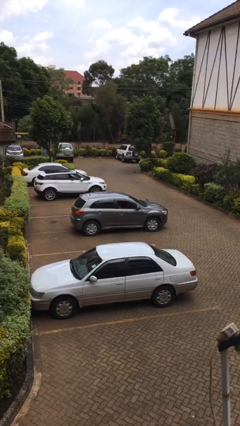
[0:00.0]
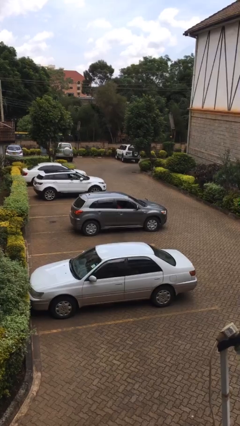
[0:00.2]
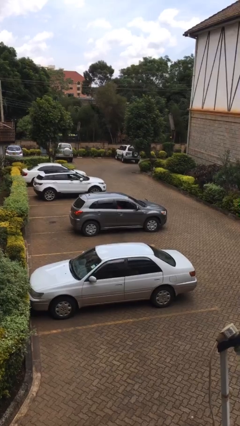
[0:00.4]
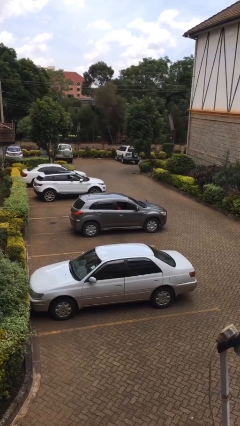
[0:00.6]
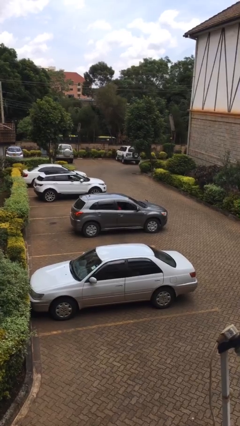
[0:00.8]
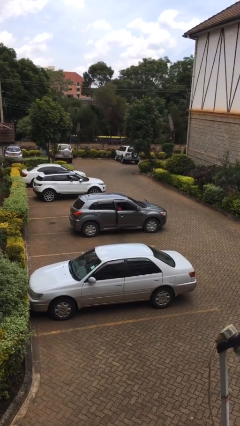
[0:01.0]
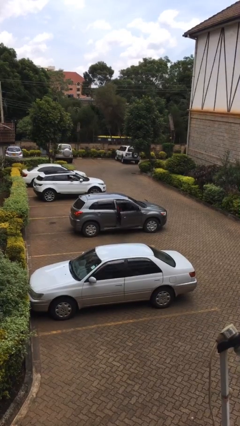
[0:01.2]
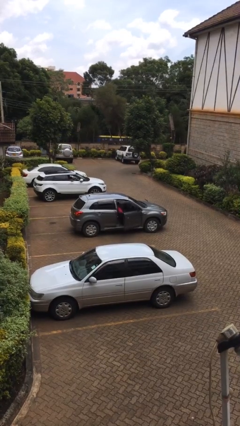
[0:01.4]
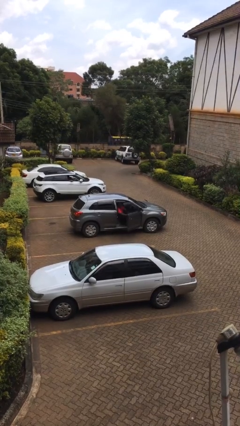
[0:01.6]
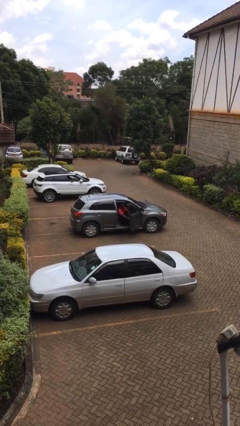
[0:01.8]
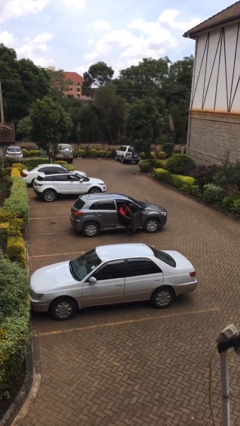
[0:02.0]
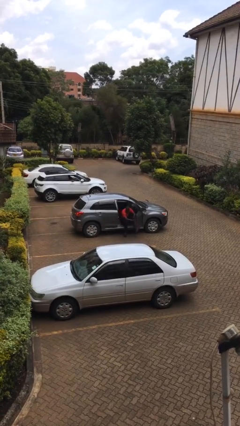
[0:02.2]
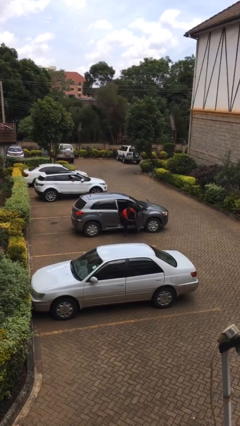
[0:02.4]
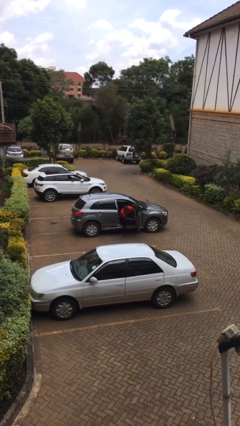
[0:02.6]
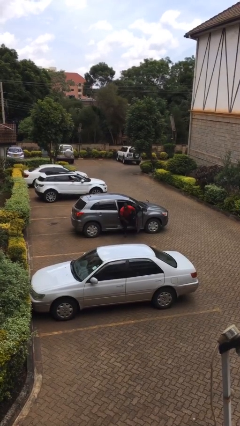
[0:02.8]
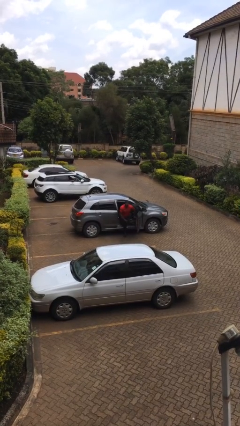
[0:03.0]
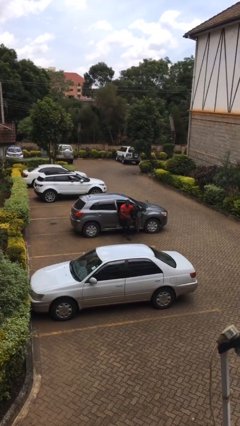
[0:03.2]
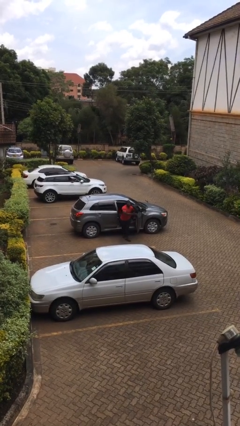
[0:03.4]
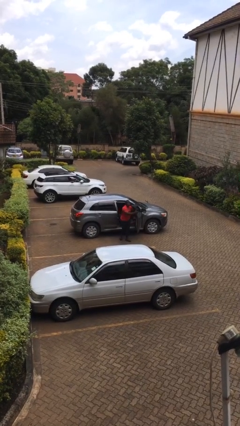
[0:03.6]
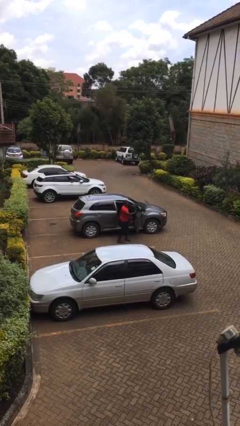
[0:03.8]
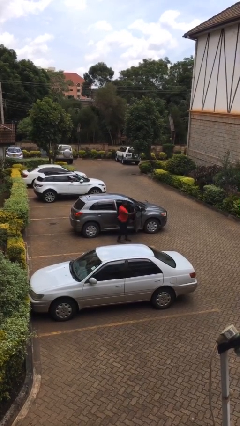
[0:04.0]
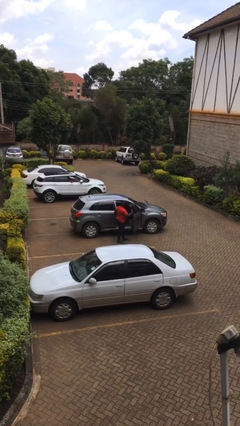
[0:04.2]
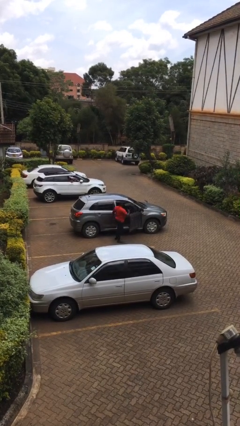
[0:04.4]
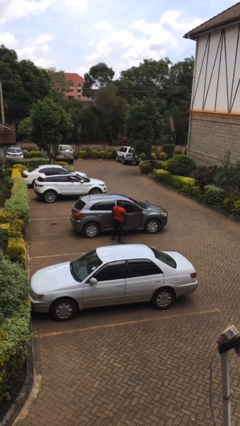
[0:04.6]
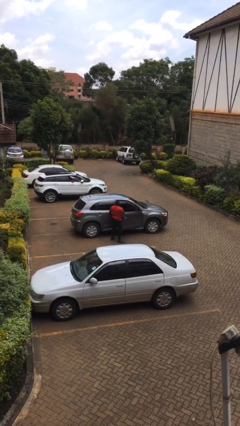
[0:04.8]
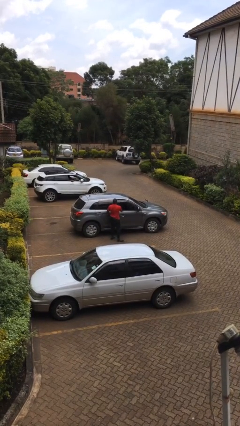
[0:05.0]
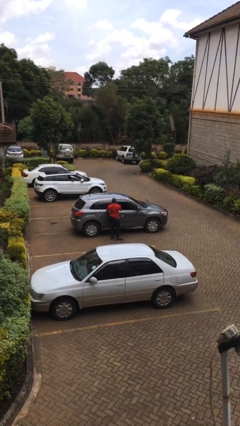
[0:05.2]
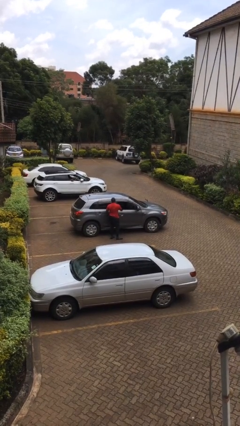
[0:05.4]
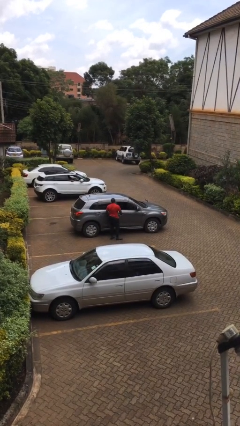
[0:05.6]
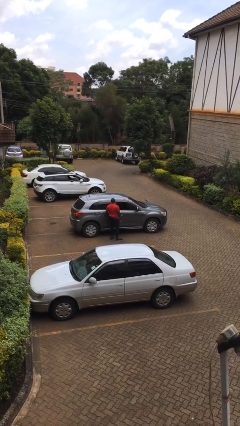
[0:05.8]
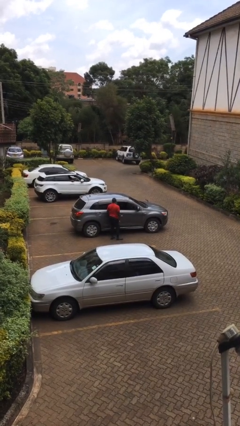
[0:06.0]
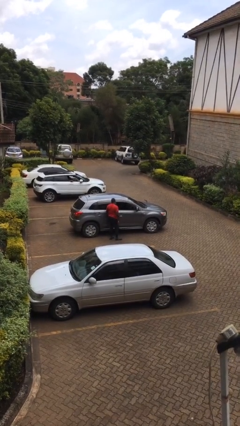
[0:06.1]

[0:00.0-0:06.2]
car drops off person

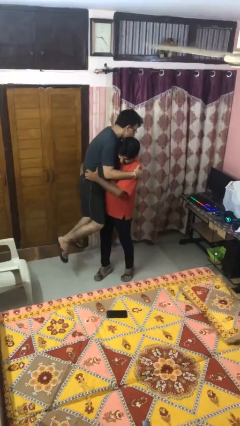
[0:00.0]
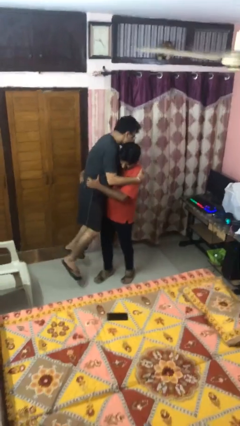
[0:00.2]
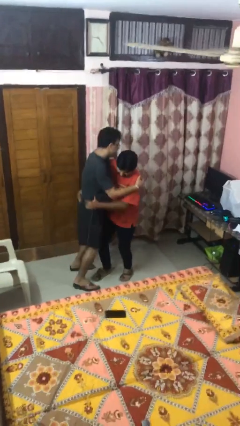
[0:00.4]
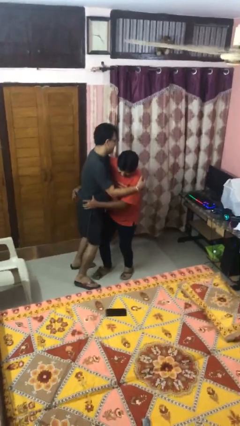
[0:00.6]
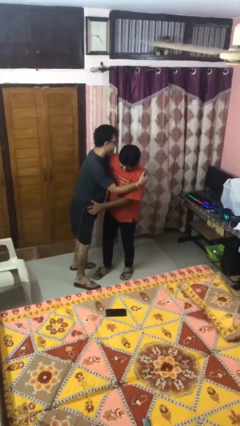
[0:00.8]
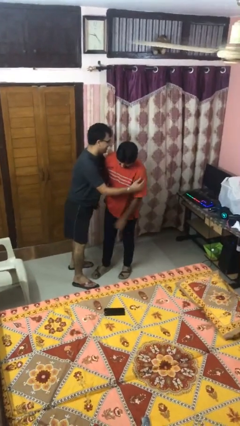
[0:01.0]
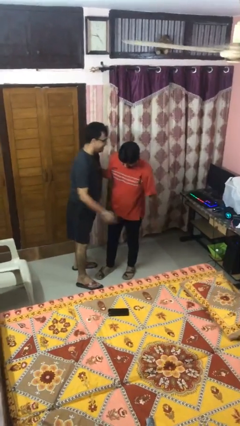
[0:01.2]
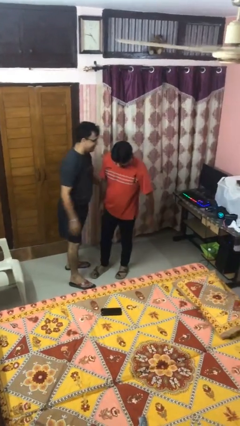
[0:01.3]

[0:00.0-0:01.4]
person puts down person

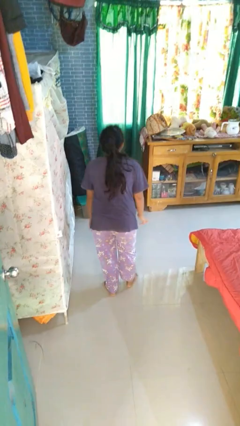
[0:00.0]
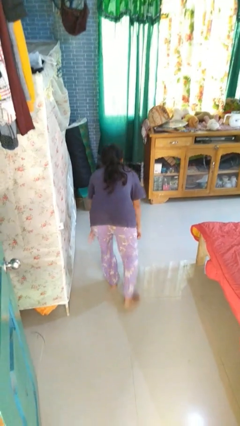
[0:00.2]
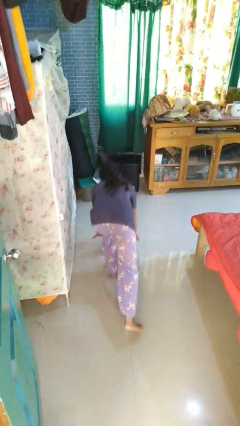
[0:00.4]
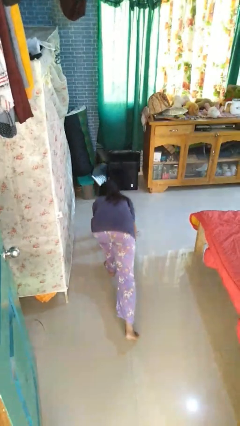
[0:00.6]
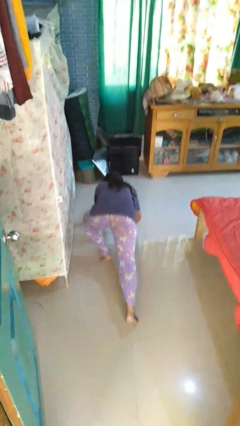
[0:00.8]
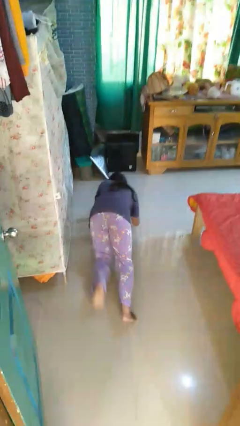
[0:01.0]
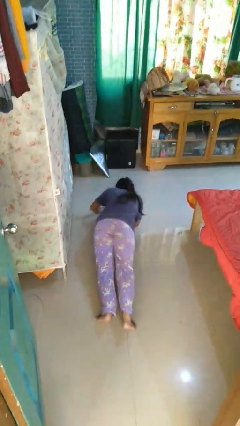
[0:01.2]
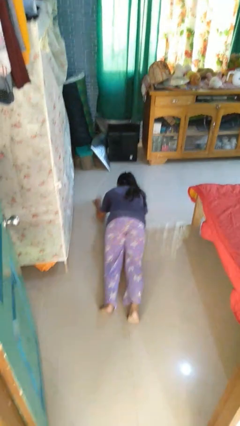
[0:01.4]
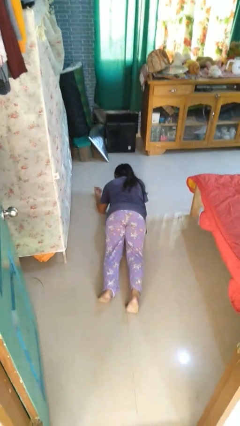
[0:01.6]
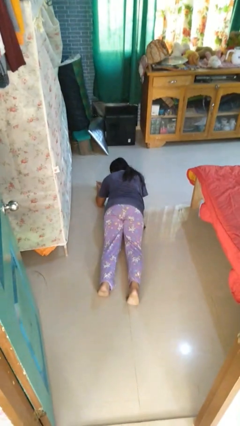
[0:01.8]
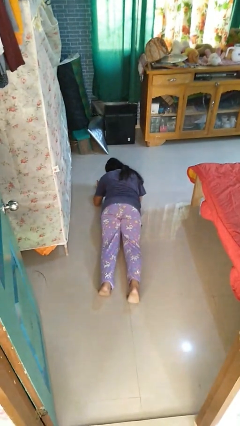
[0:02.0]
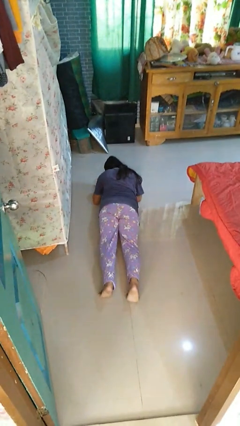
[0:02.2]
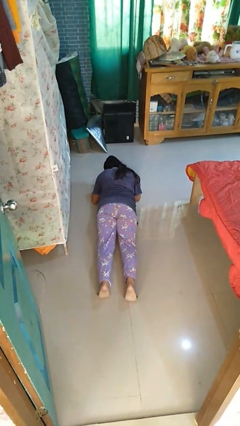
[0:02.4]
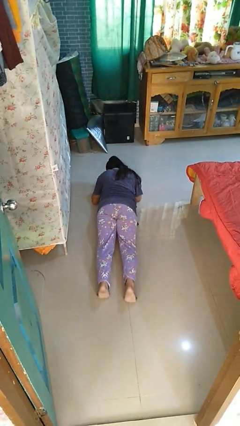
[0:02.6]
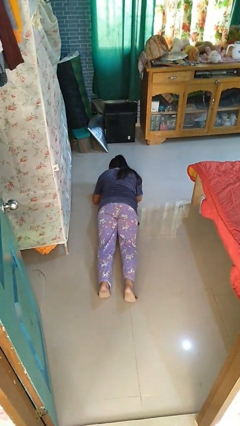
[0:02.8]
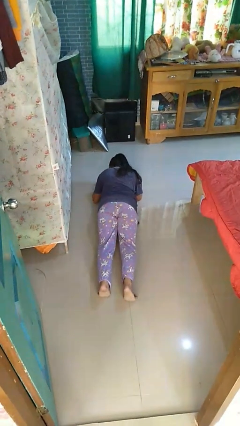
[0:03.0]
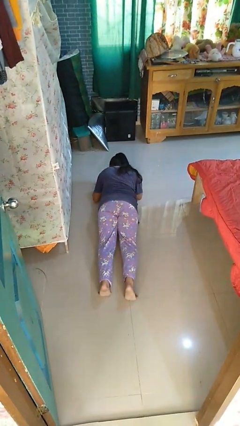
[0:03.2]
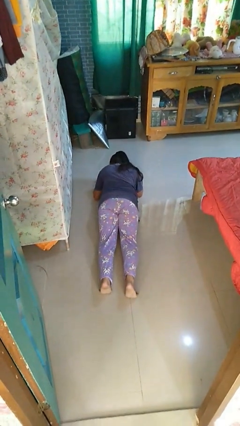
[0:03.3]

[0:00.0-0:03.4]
person exercises with plank

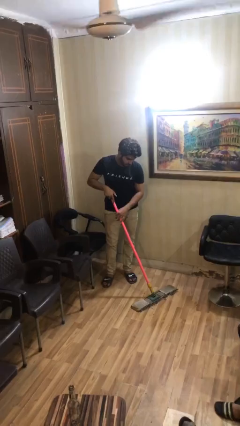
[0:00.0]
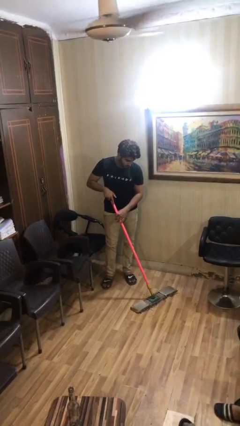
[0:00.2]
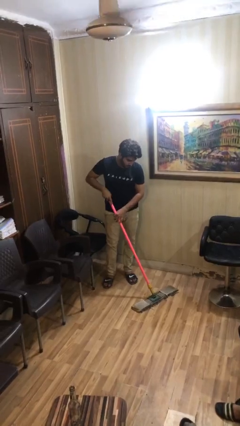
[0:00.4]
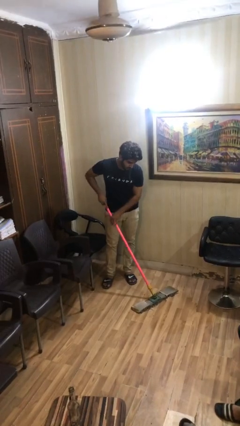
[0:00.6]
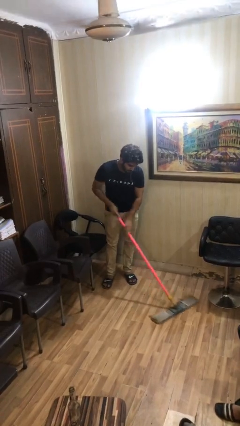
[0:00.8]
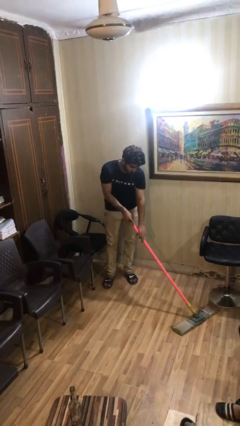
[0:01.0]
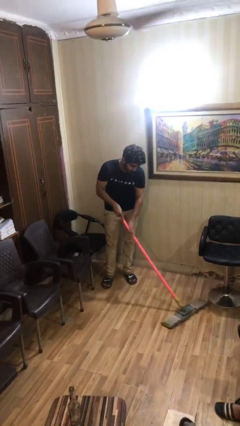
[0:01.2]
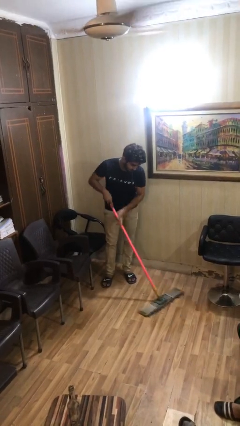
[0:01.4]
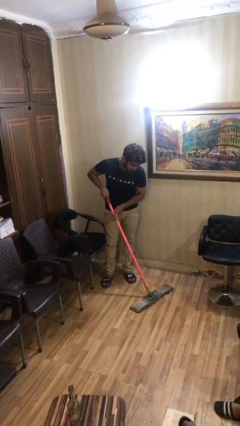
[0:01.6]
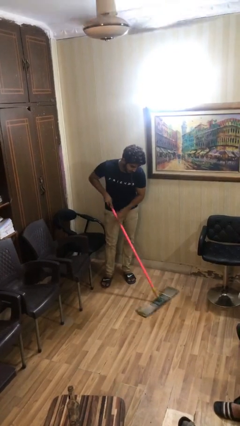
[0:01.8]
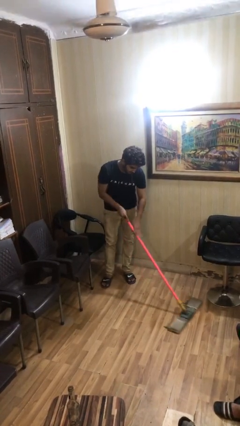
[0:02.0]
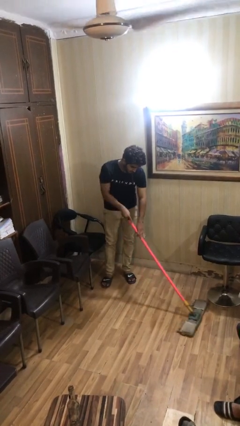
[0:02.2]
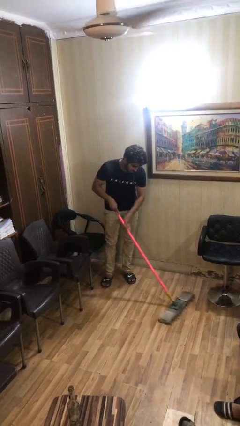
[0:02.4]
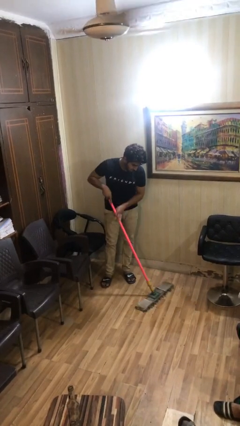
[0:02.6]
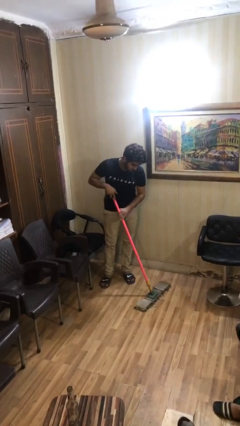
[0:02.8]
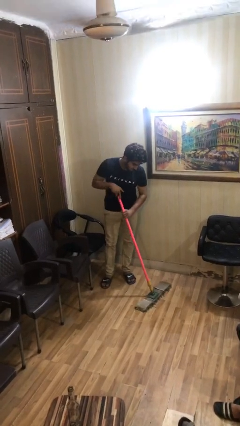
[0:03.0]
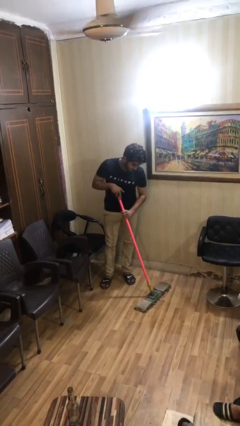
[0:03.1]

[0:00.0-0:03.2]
person sweeps floor

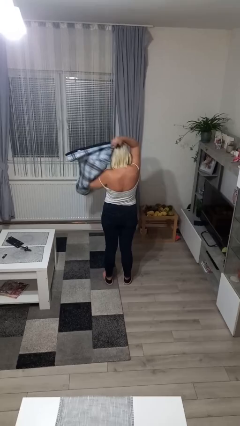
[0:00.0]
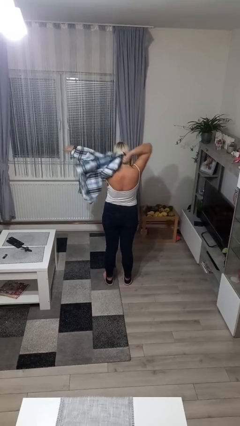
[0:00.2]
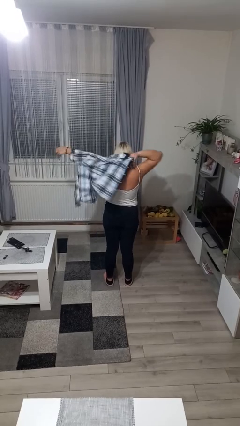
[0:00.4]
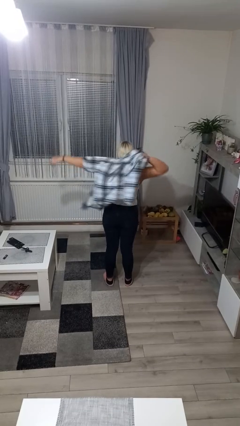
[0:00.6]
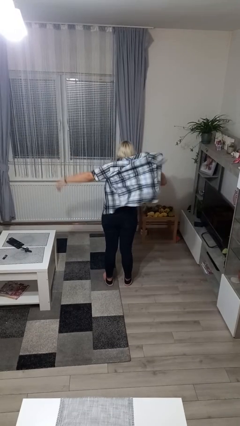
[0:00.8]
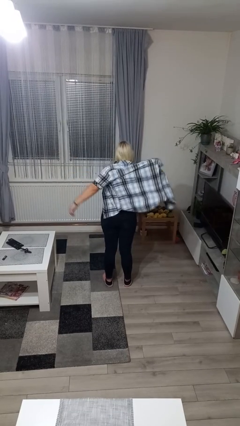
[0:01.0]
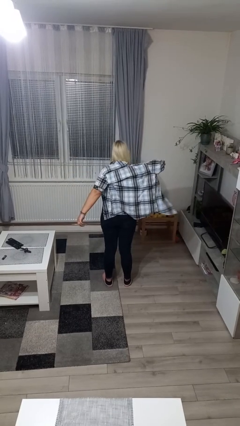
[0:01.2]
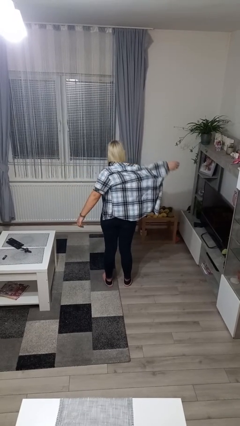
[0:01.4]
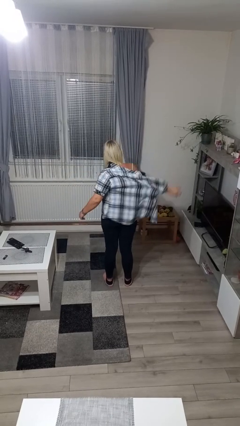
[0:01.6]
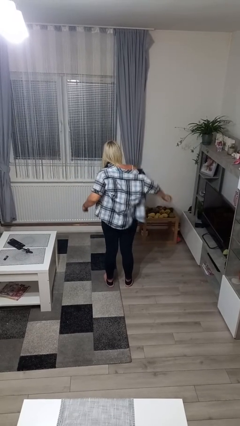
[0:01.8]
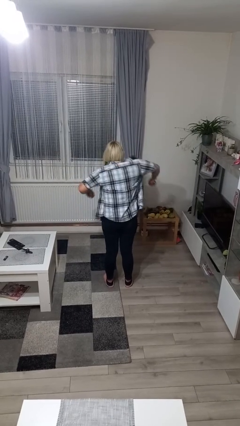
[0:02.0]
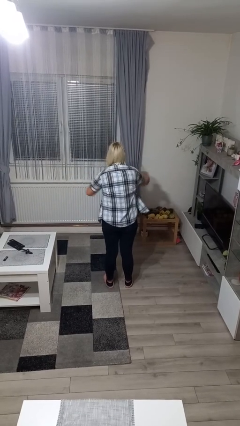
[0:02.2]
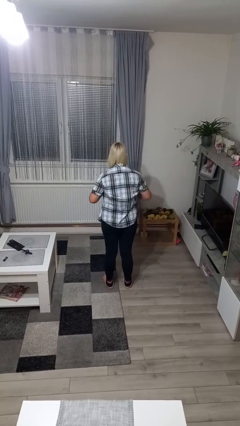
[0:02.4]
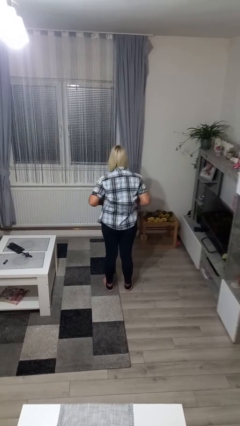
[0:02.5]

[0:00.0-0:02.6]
person puts on shirt

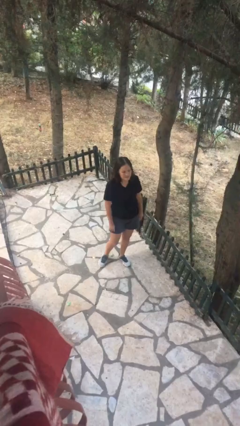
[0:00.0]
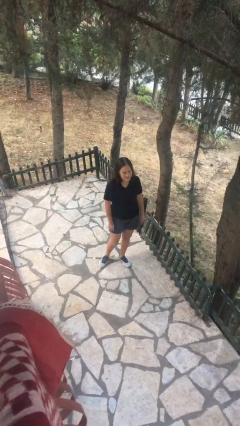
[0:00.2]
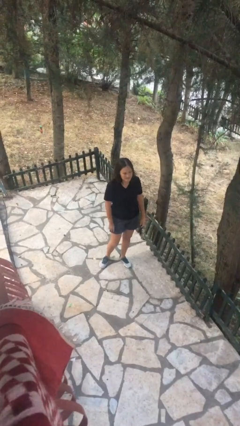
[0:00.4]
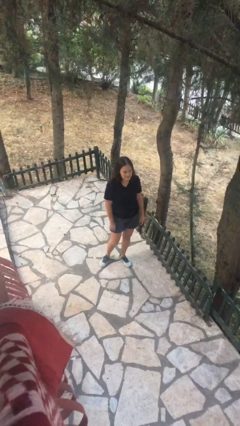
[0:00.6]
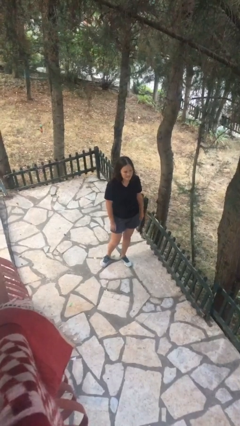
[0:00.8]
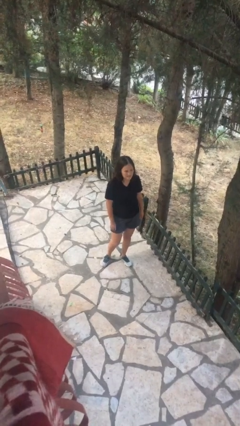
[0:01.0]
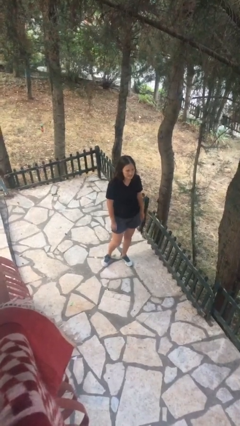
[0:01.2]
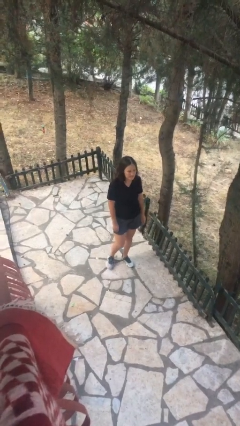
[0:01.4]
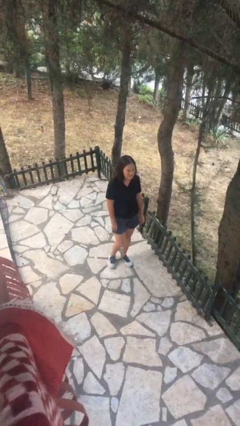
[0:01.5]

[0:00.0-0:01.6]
person points at person
